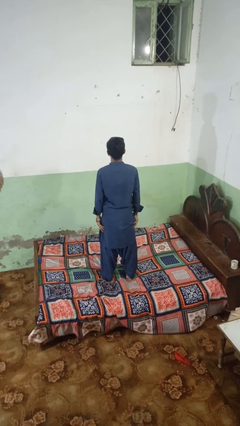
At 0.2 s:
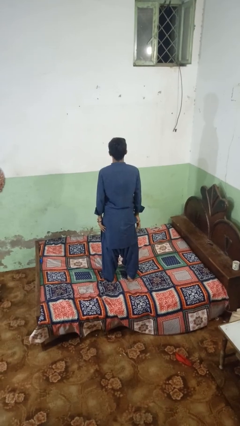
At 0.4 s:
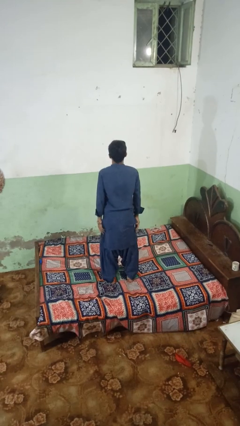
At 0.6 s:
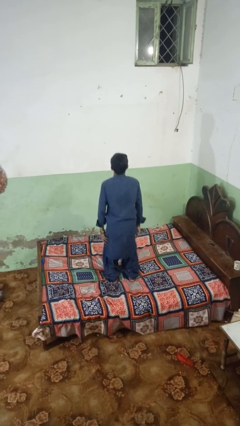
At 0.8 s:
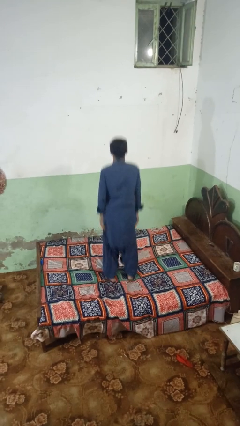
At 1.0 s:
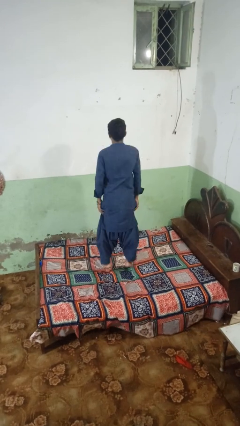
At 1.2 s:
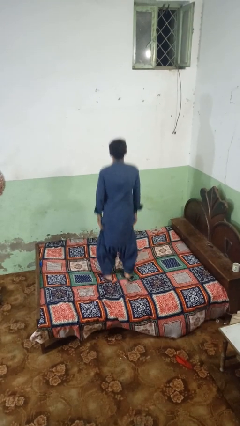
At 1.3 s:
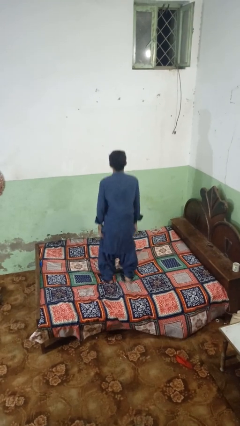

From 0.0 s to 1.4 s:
person jumps on bed

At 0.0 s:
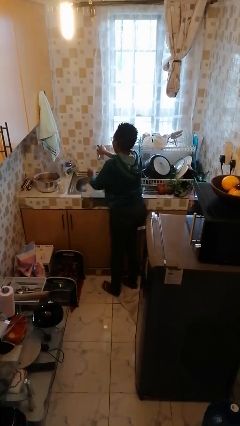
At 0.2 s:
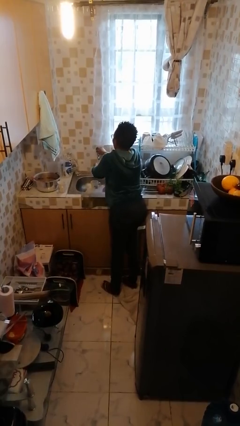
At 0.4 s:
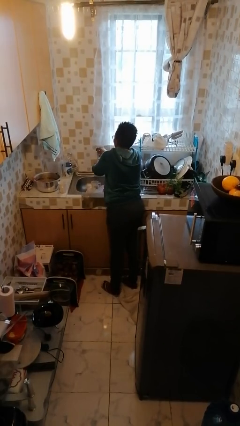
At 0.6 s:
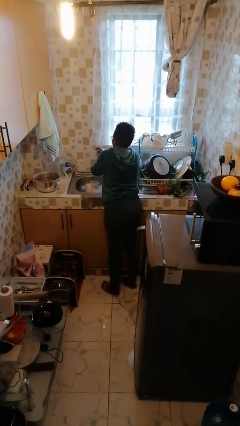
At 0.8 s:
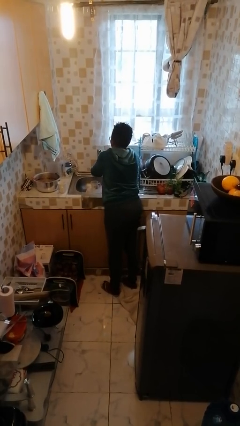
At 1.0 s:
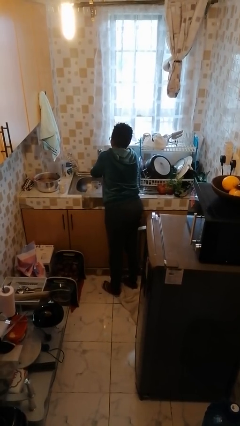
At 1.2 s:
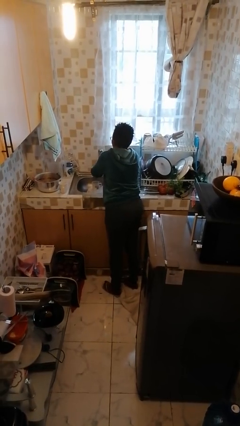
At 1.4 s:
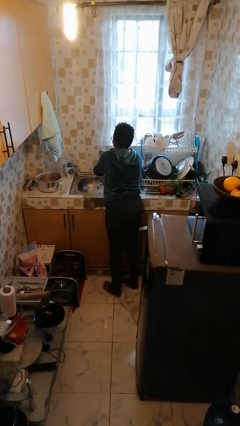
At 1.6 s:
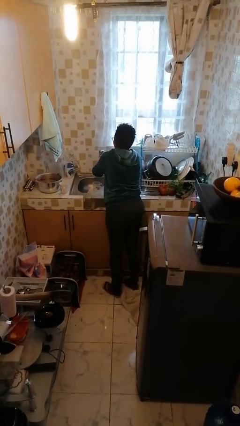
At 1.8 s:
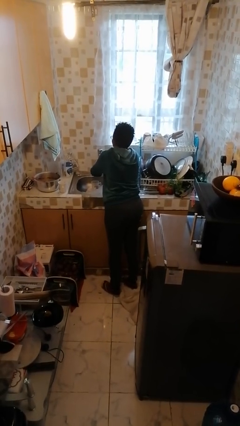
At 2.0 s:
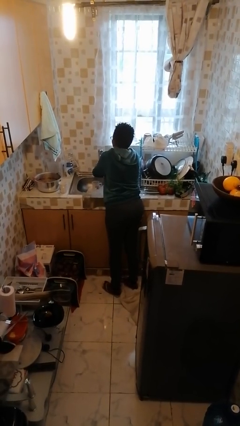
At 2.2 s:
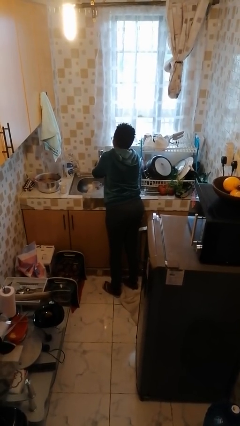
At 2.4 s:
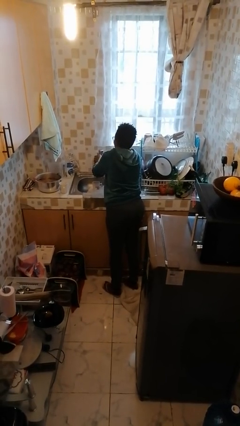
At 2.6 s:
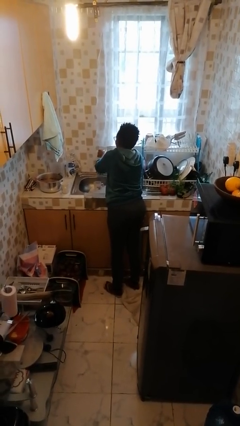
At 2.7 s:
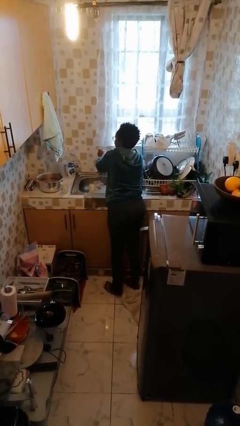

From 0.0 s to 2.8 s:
person washes hands

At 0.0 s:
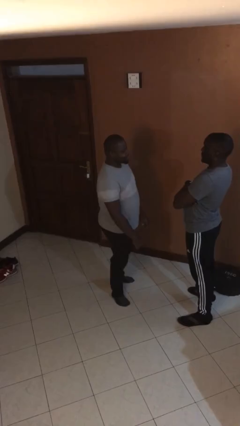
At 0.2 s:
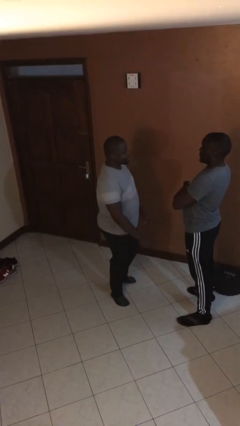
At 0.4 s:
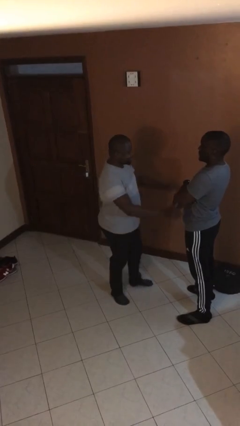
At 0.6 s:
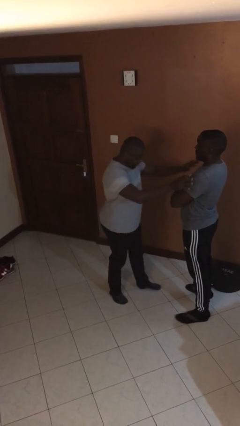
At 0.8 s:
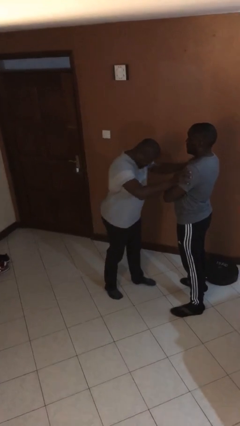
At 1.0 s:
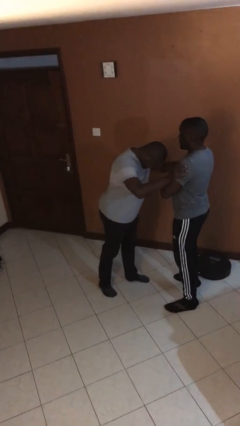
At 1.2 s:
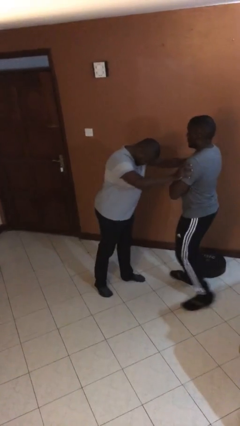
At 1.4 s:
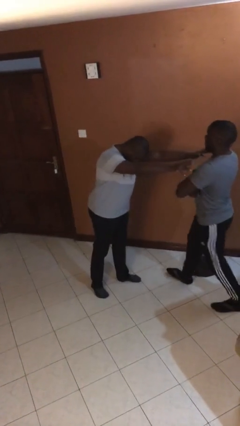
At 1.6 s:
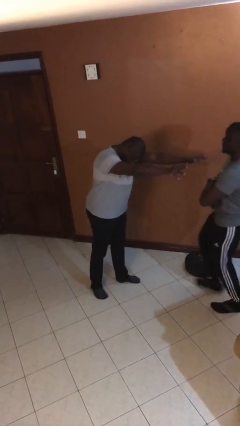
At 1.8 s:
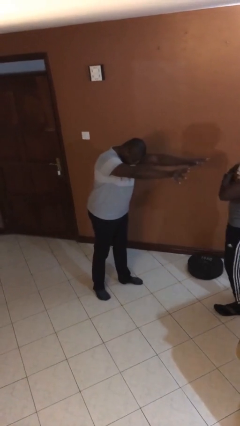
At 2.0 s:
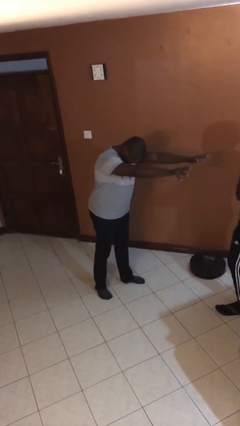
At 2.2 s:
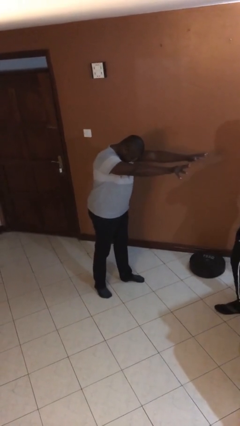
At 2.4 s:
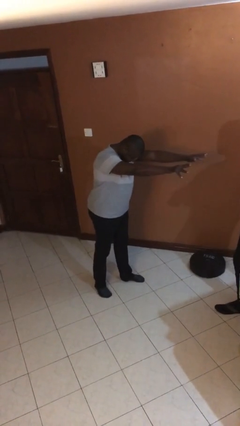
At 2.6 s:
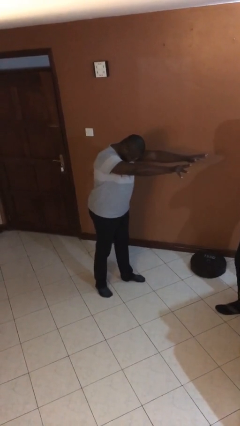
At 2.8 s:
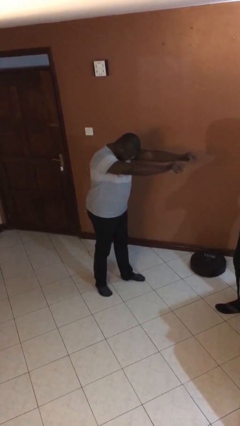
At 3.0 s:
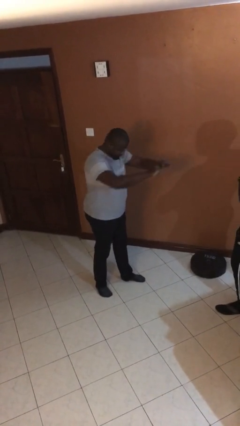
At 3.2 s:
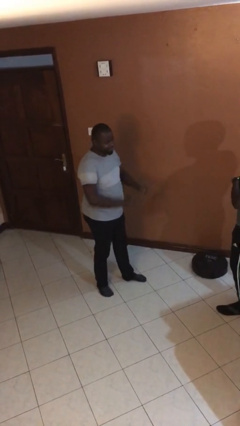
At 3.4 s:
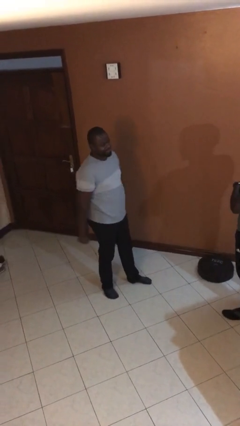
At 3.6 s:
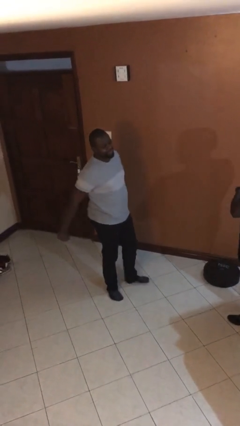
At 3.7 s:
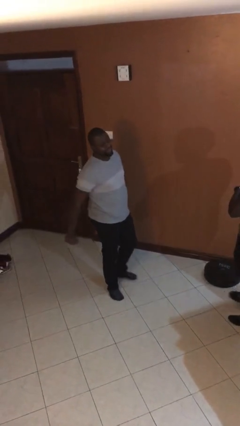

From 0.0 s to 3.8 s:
person shoves person

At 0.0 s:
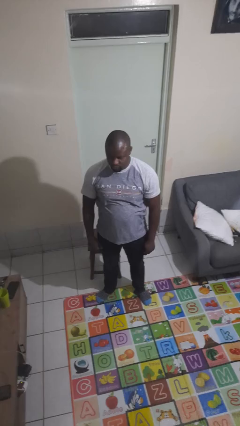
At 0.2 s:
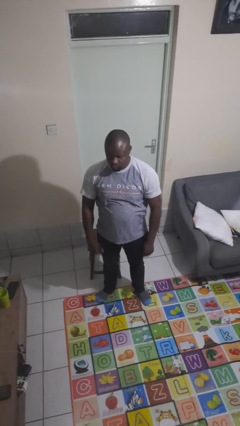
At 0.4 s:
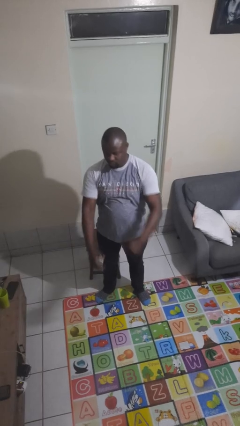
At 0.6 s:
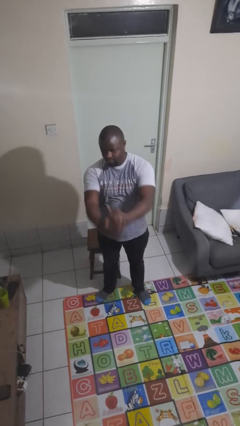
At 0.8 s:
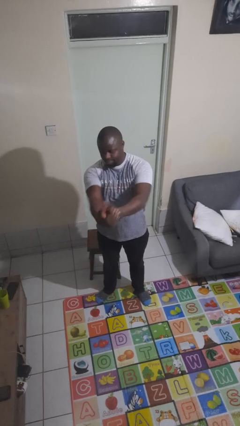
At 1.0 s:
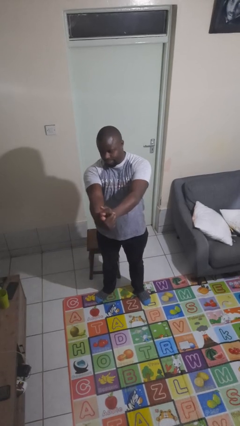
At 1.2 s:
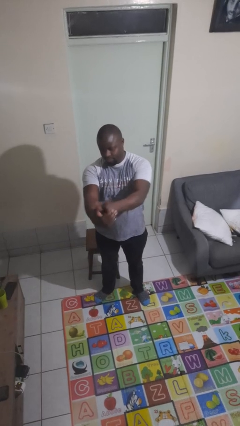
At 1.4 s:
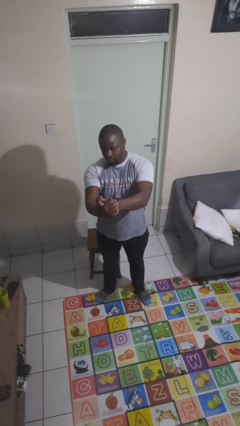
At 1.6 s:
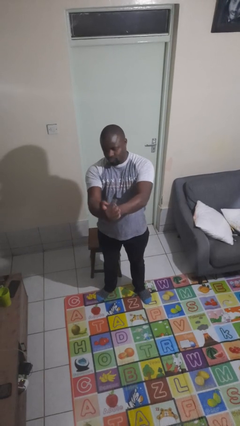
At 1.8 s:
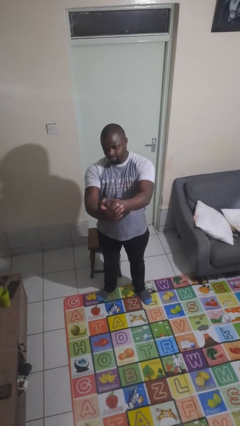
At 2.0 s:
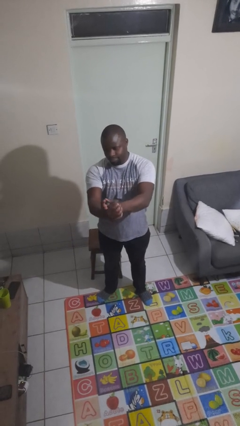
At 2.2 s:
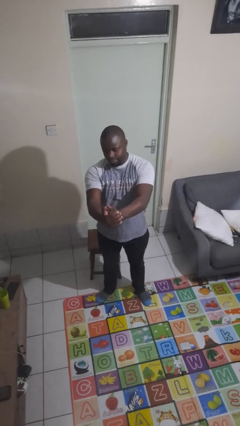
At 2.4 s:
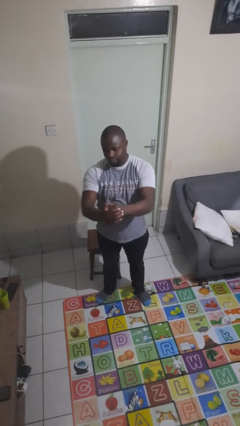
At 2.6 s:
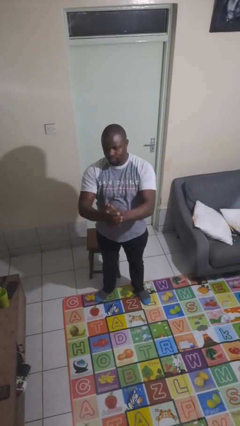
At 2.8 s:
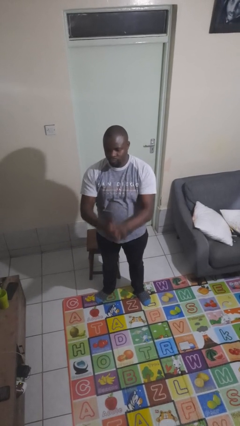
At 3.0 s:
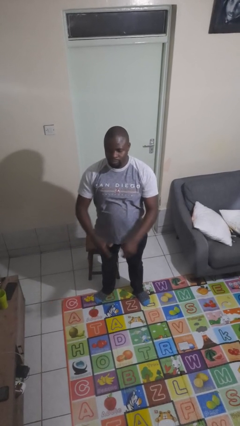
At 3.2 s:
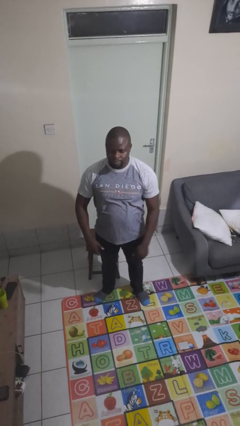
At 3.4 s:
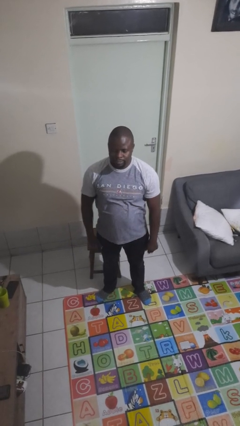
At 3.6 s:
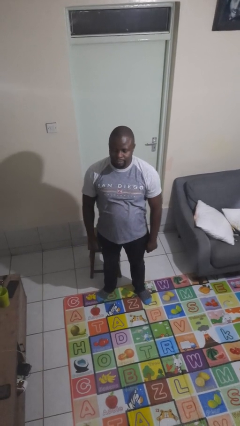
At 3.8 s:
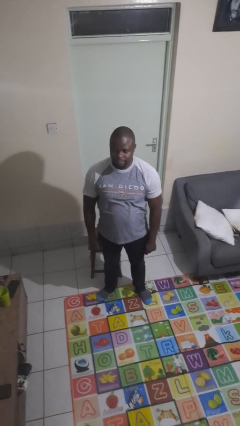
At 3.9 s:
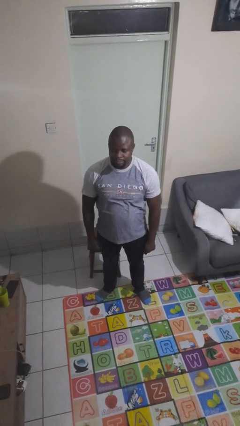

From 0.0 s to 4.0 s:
person cracks knuckles

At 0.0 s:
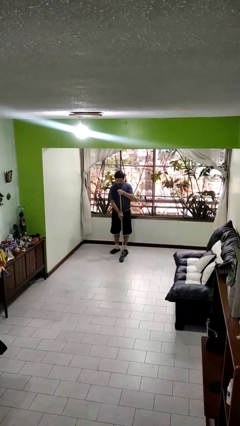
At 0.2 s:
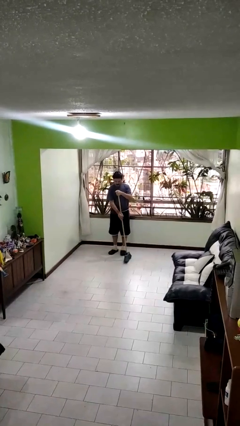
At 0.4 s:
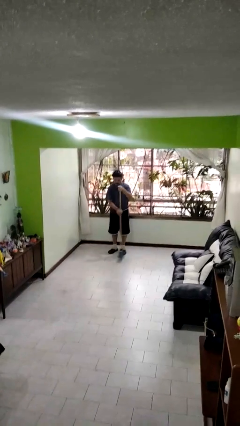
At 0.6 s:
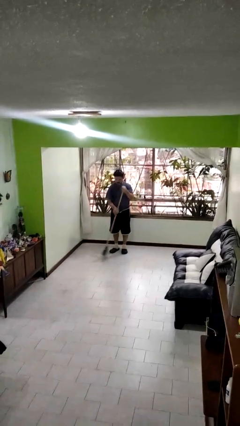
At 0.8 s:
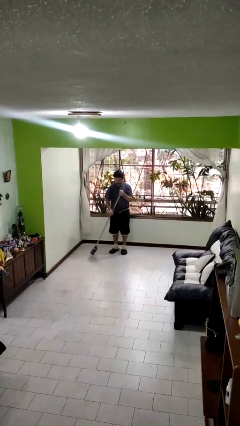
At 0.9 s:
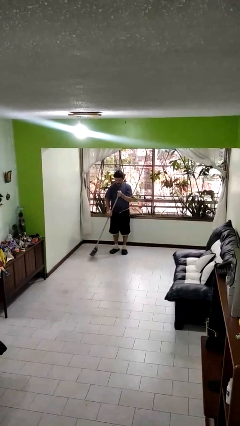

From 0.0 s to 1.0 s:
person sweeps floor

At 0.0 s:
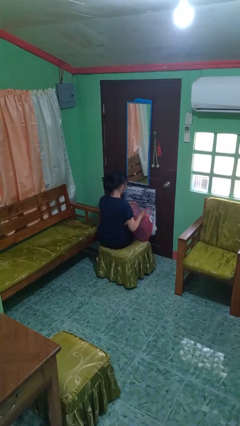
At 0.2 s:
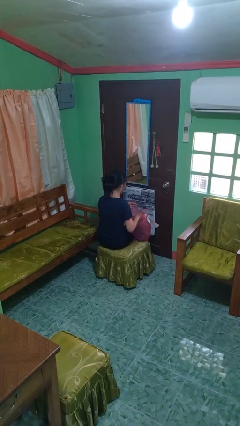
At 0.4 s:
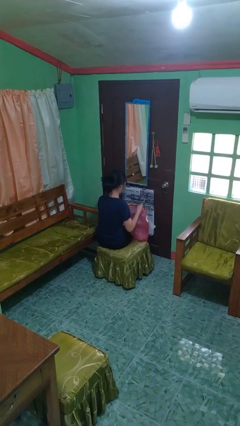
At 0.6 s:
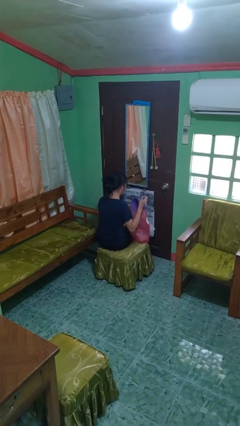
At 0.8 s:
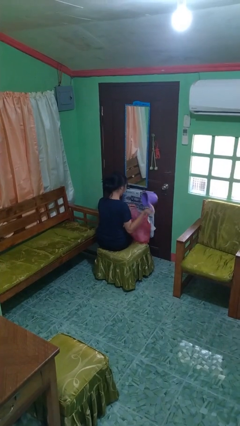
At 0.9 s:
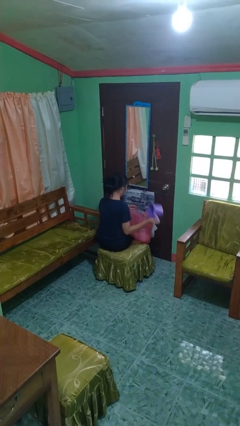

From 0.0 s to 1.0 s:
person takes object from bag

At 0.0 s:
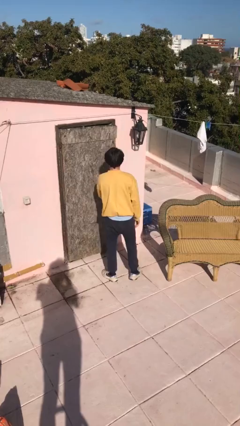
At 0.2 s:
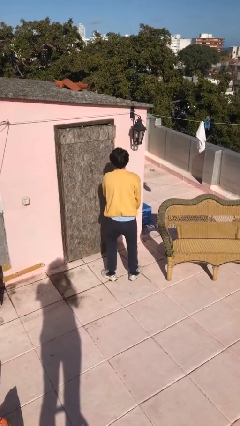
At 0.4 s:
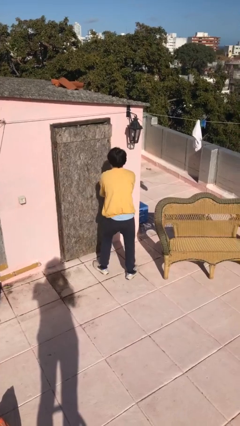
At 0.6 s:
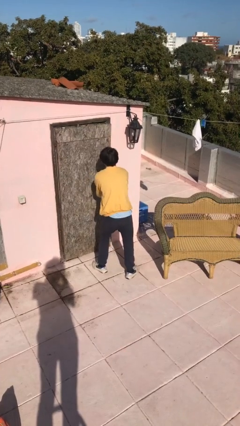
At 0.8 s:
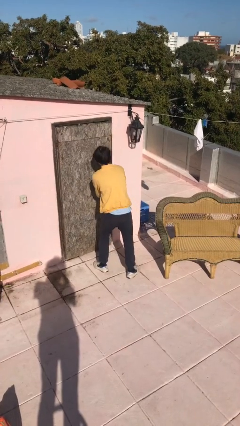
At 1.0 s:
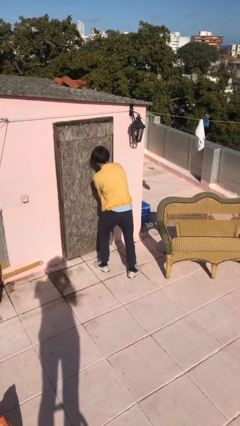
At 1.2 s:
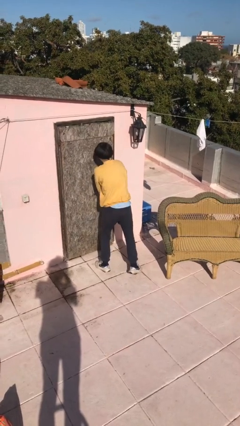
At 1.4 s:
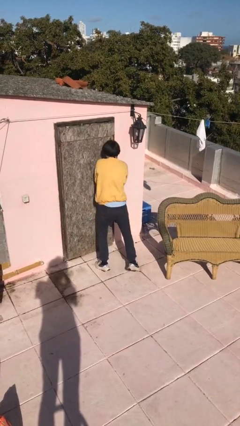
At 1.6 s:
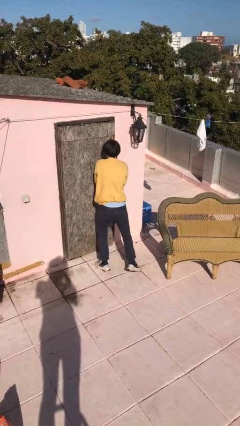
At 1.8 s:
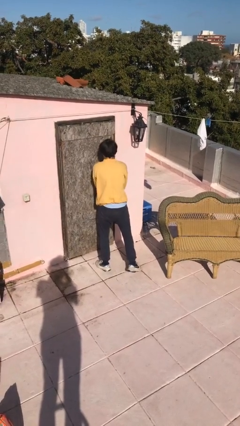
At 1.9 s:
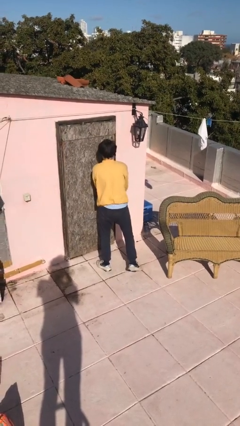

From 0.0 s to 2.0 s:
person unlocks door with keys

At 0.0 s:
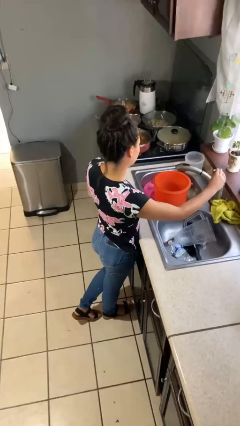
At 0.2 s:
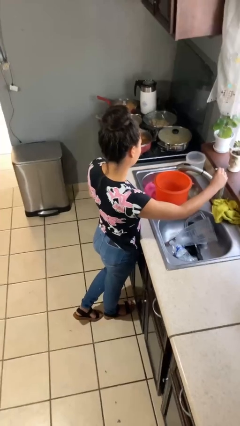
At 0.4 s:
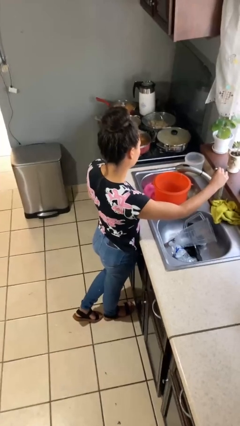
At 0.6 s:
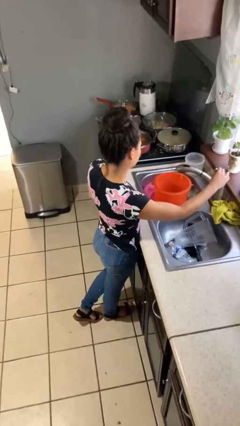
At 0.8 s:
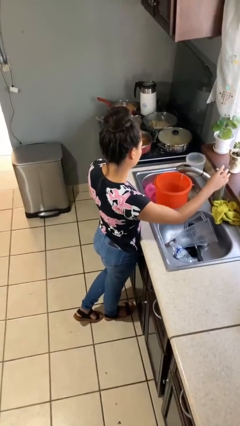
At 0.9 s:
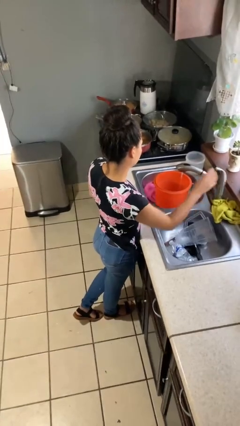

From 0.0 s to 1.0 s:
person turns on faucet
